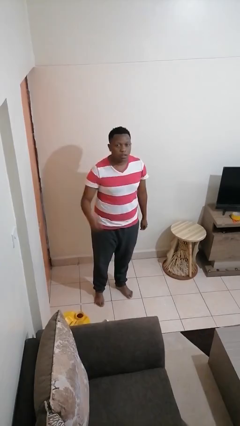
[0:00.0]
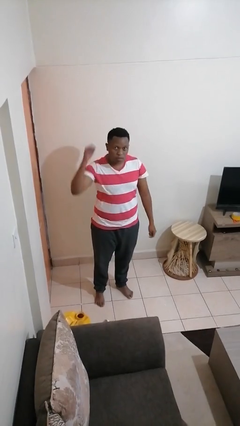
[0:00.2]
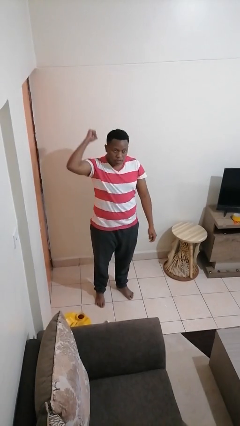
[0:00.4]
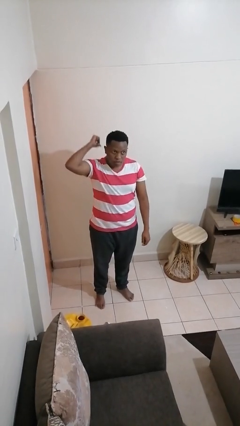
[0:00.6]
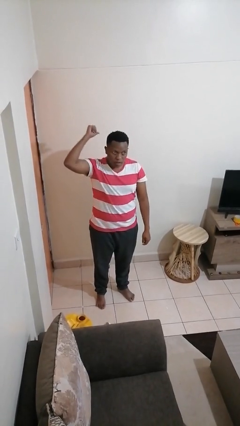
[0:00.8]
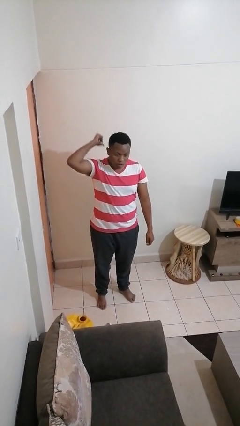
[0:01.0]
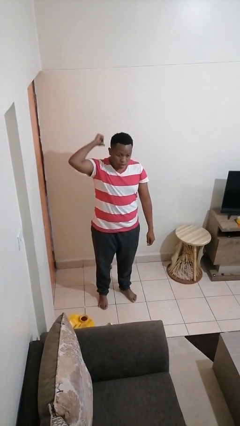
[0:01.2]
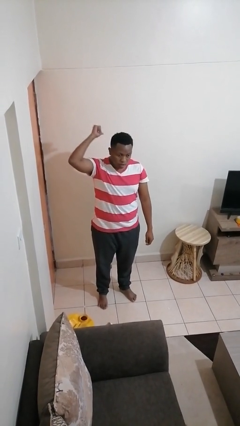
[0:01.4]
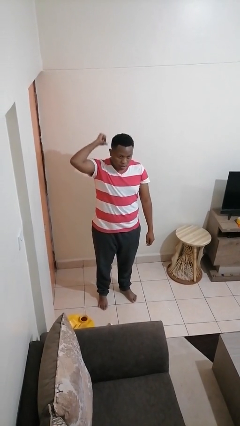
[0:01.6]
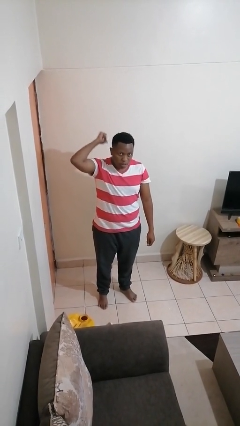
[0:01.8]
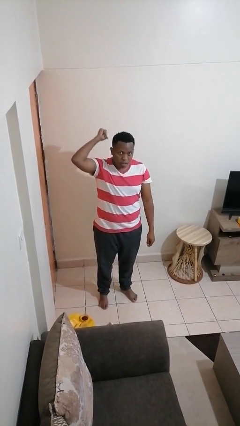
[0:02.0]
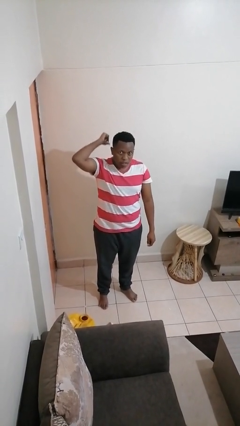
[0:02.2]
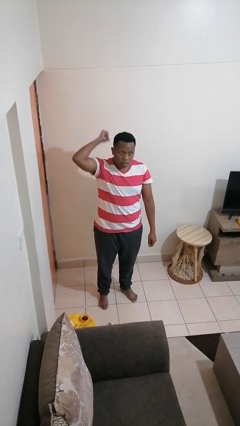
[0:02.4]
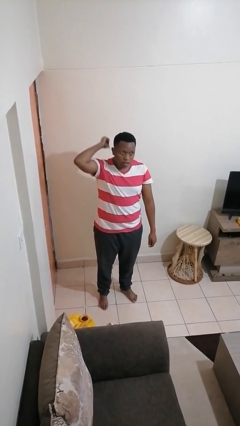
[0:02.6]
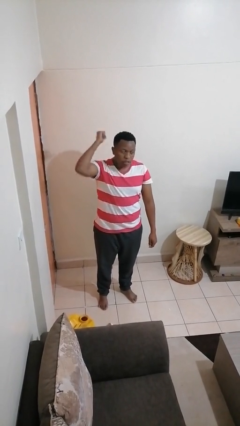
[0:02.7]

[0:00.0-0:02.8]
person gestures behind me

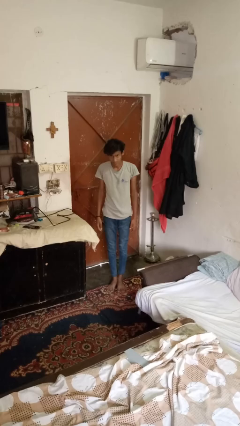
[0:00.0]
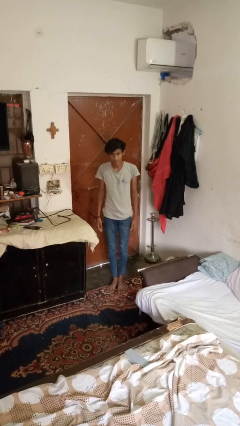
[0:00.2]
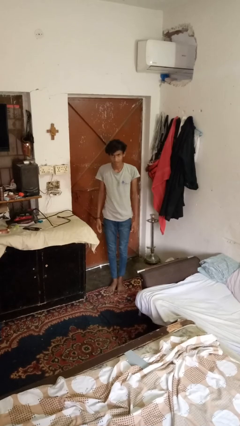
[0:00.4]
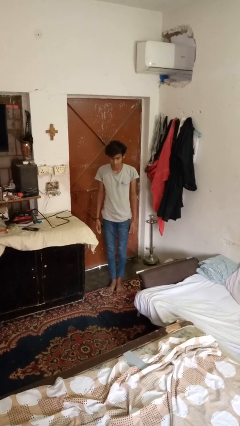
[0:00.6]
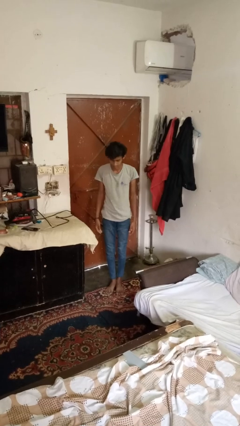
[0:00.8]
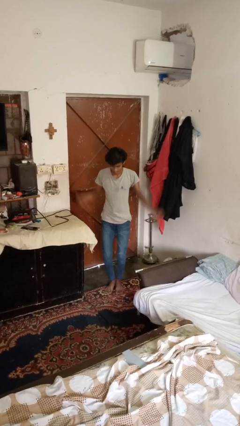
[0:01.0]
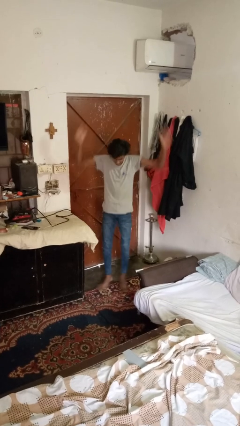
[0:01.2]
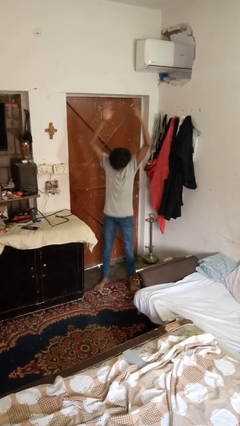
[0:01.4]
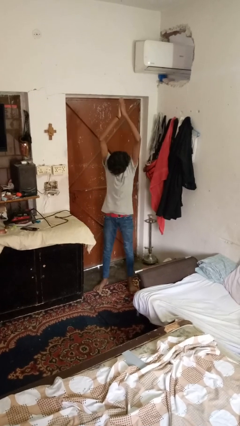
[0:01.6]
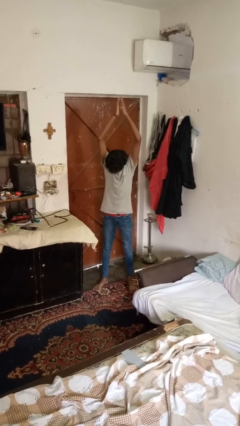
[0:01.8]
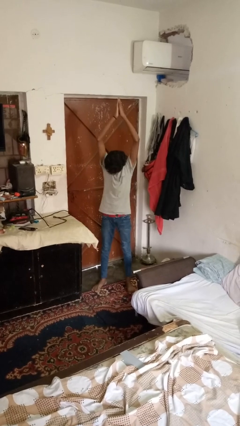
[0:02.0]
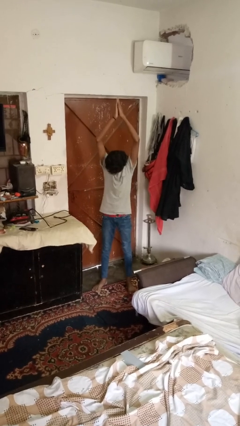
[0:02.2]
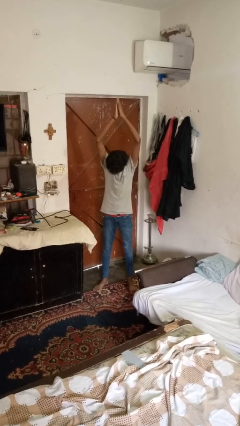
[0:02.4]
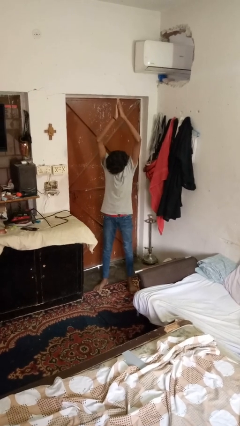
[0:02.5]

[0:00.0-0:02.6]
person exercises with jumping jacks

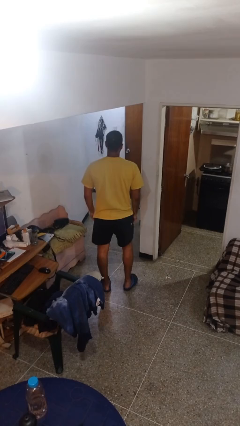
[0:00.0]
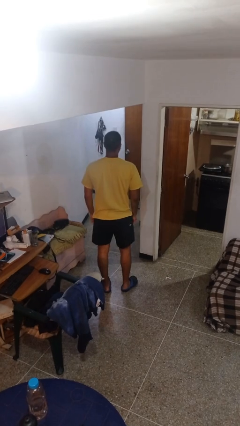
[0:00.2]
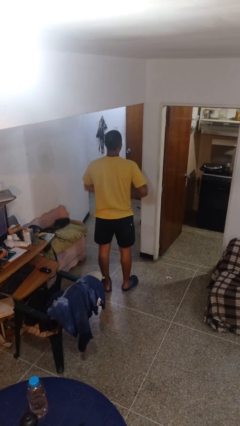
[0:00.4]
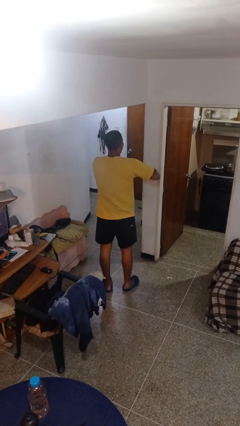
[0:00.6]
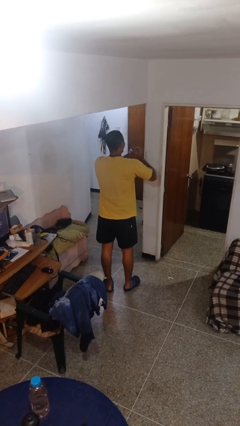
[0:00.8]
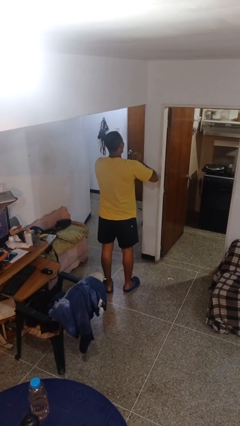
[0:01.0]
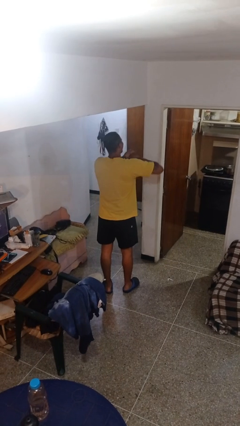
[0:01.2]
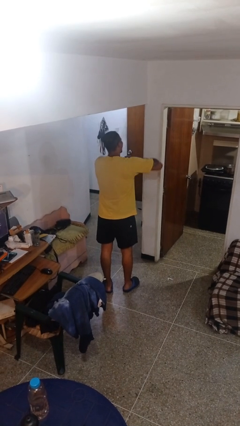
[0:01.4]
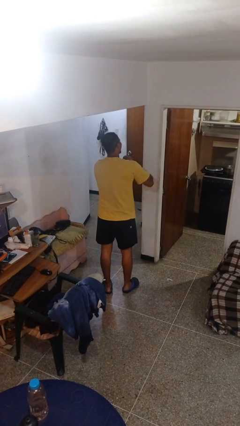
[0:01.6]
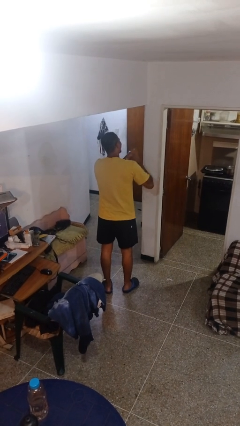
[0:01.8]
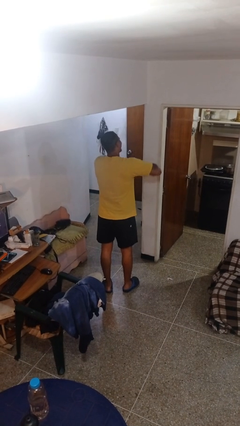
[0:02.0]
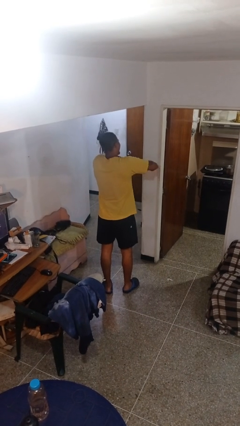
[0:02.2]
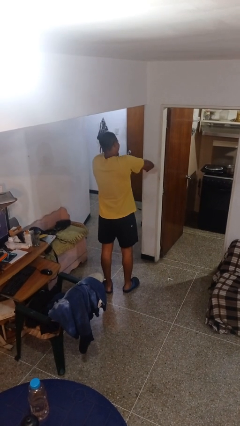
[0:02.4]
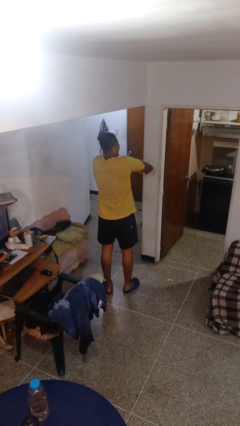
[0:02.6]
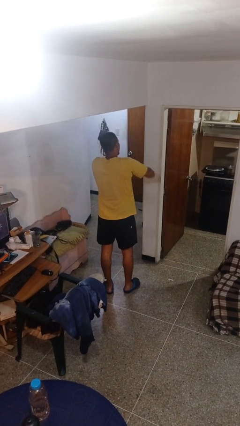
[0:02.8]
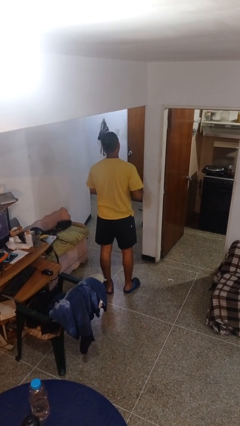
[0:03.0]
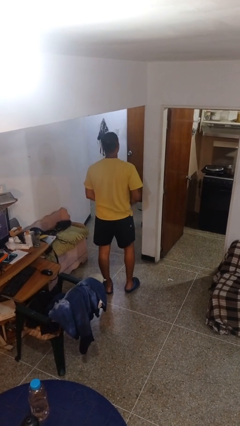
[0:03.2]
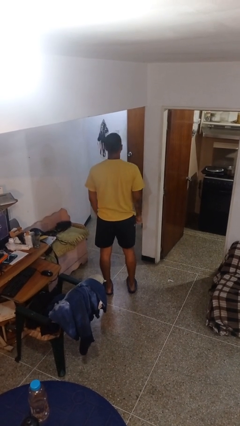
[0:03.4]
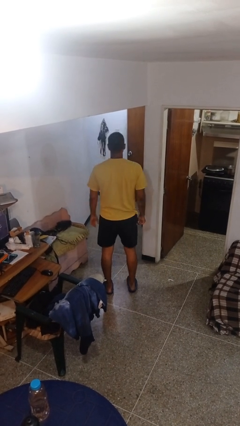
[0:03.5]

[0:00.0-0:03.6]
person cracks knuckles

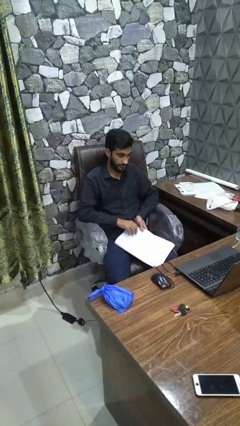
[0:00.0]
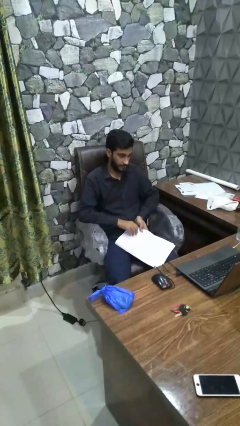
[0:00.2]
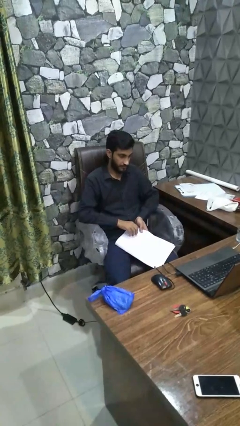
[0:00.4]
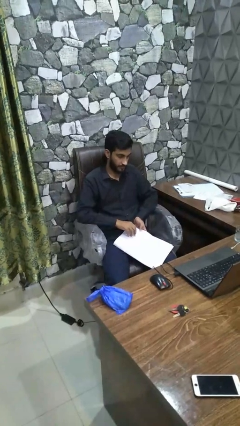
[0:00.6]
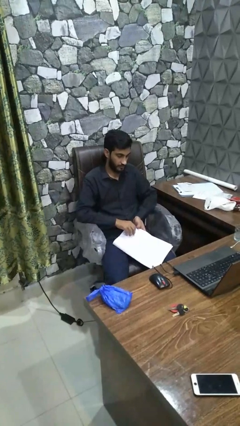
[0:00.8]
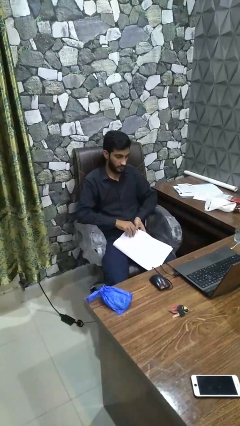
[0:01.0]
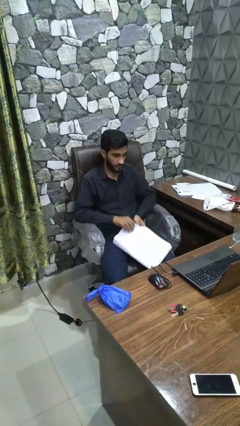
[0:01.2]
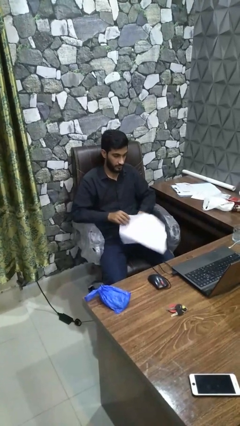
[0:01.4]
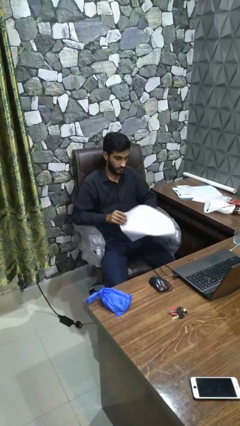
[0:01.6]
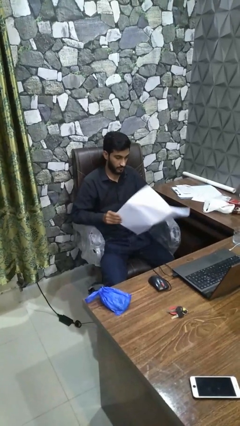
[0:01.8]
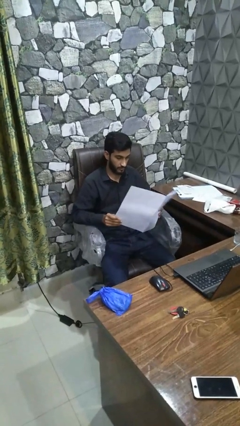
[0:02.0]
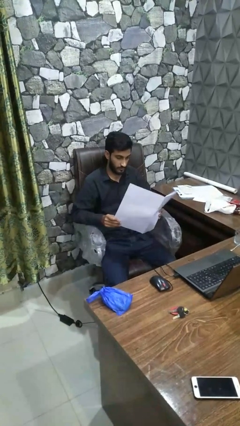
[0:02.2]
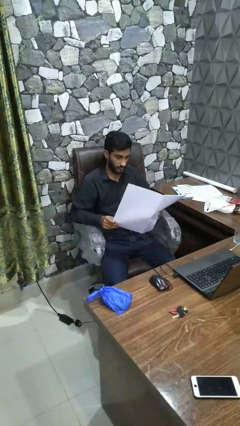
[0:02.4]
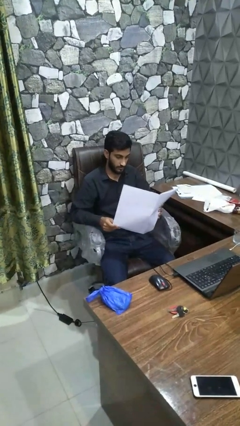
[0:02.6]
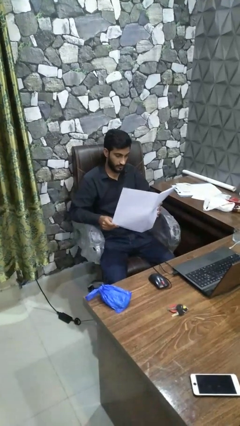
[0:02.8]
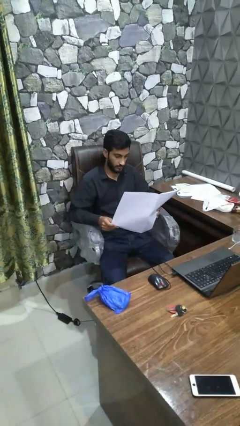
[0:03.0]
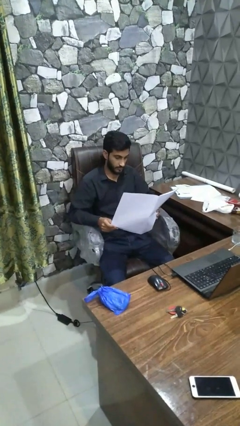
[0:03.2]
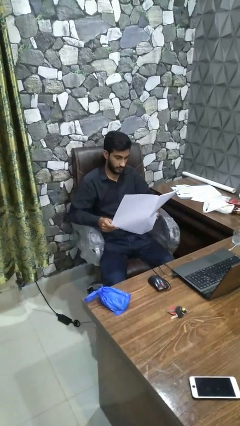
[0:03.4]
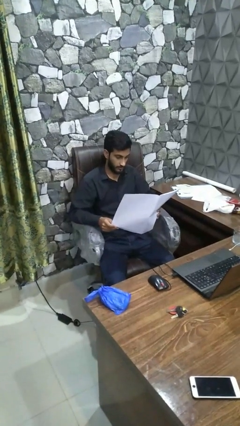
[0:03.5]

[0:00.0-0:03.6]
person reads magazine

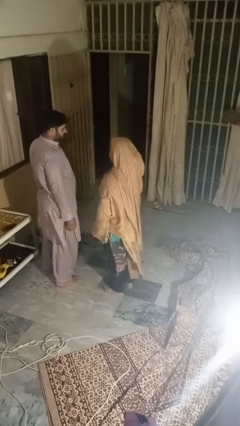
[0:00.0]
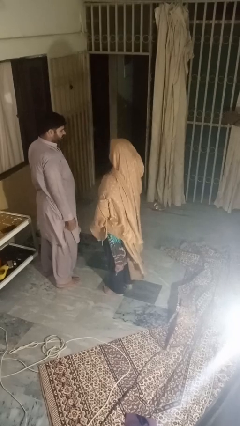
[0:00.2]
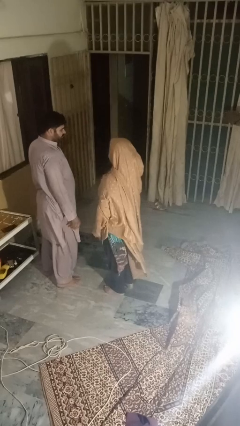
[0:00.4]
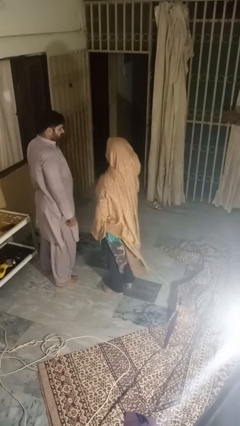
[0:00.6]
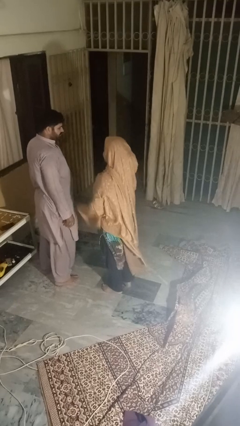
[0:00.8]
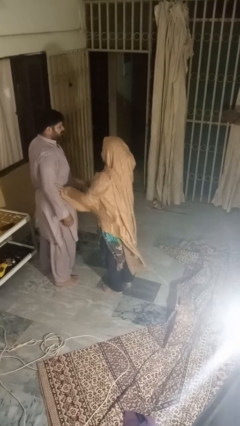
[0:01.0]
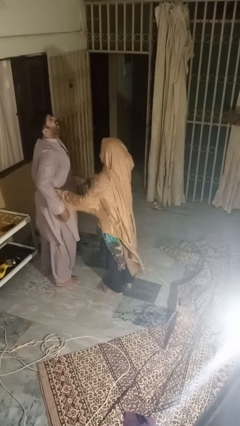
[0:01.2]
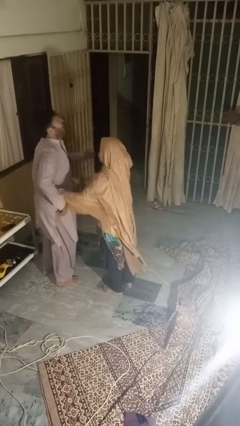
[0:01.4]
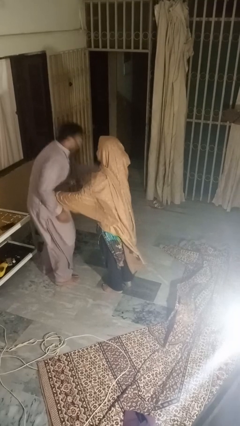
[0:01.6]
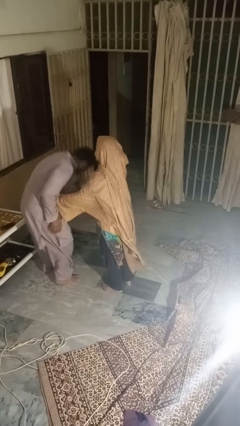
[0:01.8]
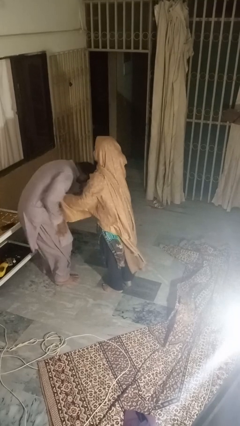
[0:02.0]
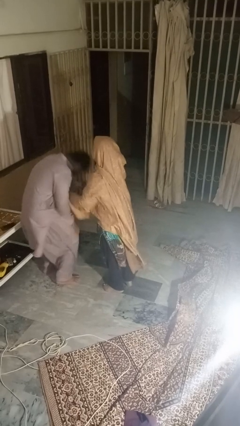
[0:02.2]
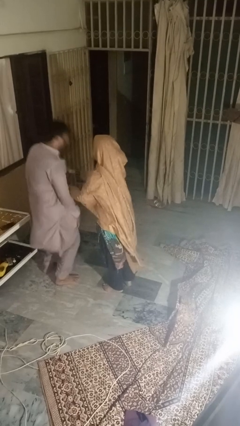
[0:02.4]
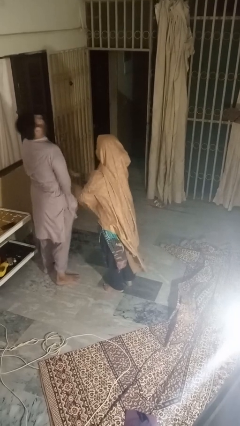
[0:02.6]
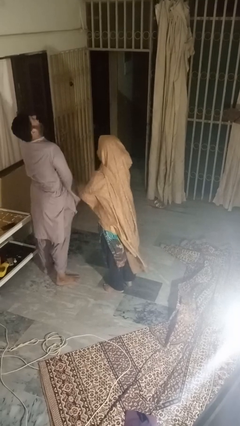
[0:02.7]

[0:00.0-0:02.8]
person tickles person

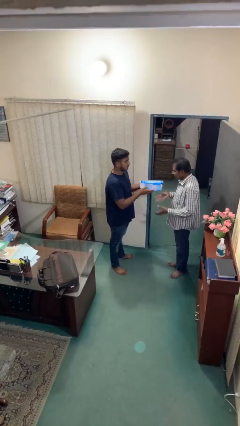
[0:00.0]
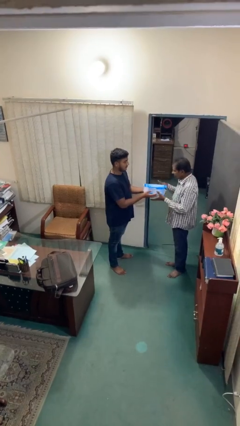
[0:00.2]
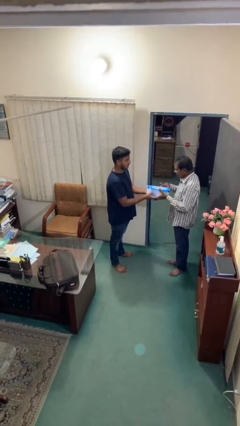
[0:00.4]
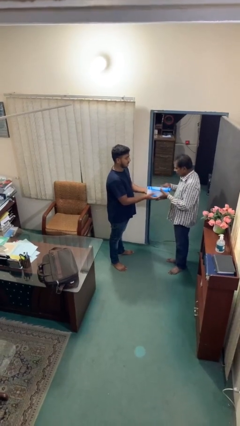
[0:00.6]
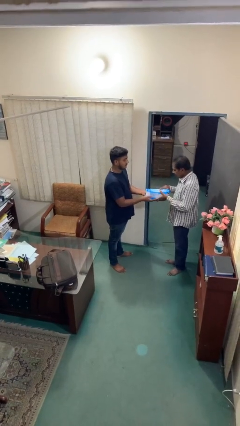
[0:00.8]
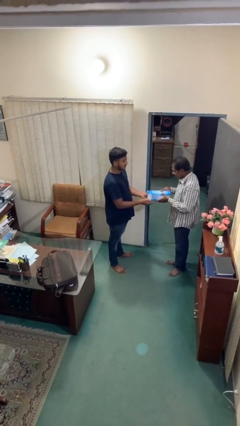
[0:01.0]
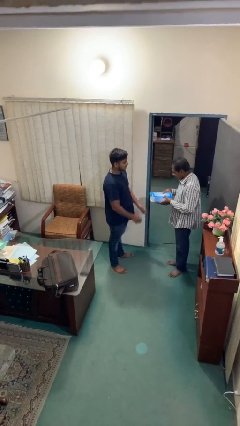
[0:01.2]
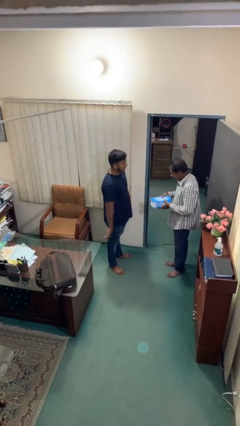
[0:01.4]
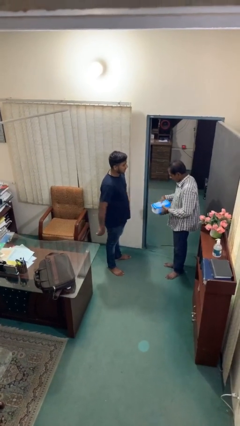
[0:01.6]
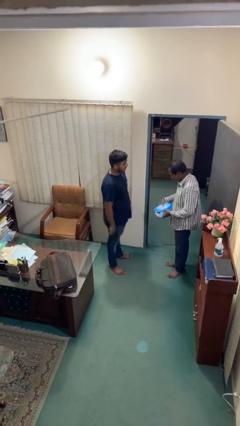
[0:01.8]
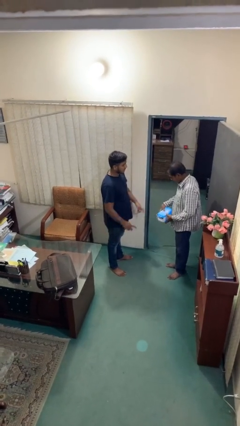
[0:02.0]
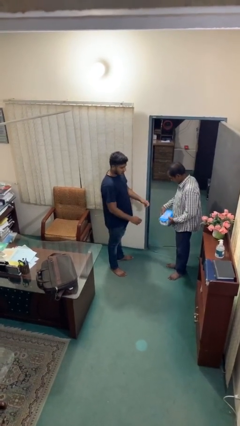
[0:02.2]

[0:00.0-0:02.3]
person transfers object to person
